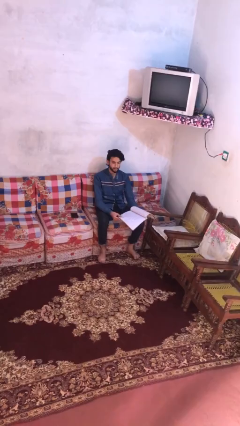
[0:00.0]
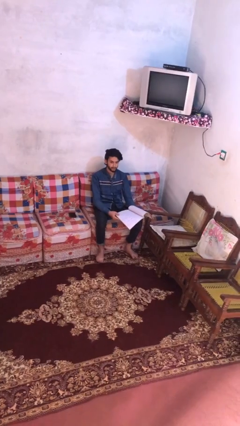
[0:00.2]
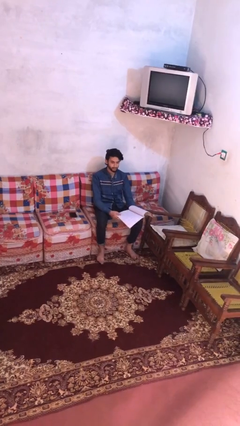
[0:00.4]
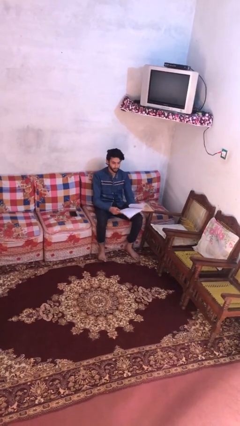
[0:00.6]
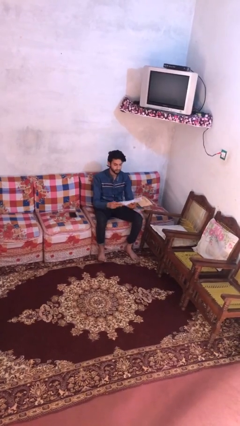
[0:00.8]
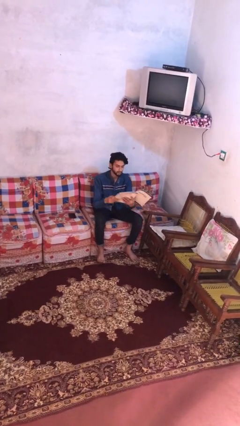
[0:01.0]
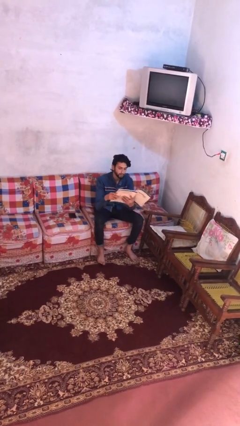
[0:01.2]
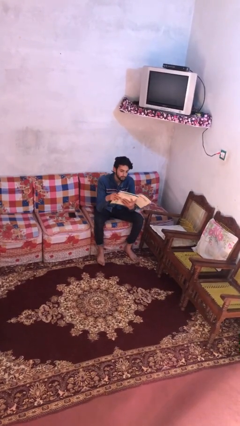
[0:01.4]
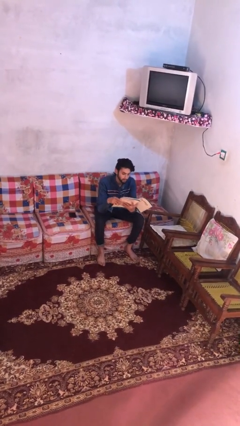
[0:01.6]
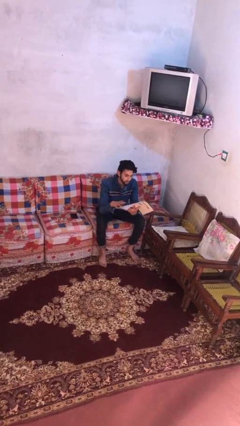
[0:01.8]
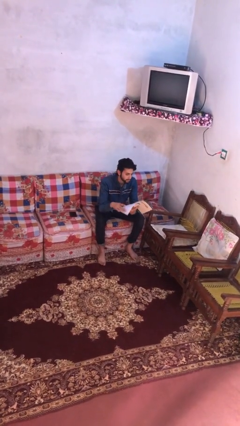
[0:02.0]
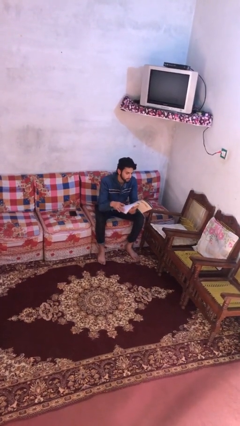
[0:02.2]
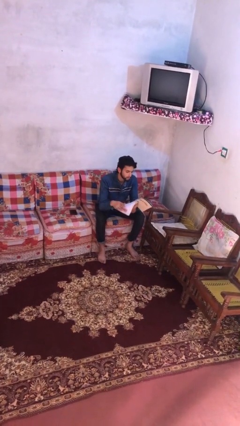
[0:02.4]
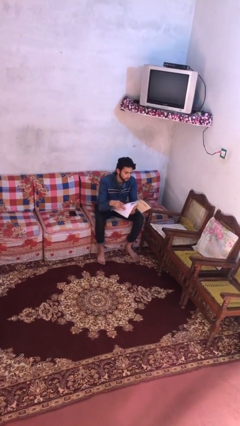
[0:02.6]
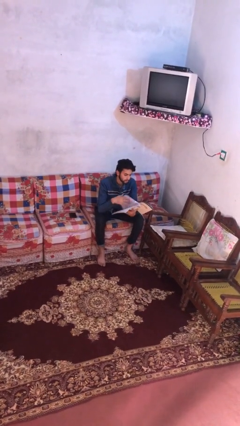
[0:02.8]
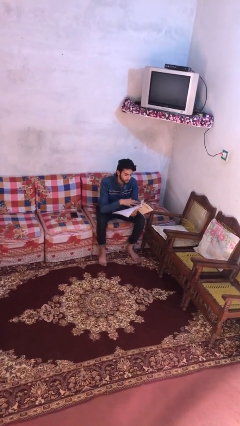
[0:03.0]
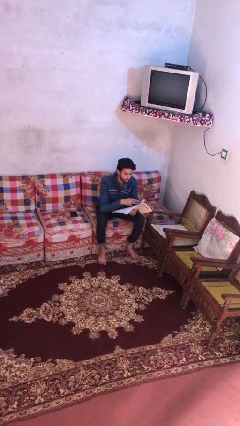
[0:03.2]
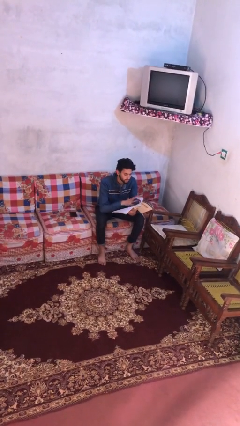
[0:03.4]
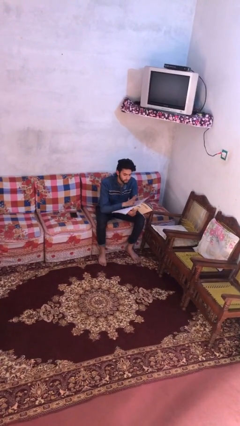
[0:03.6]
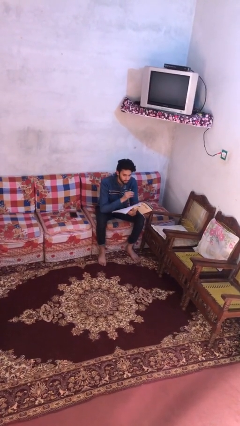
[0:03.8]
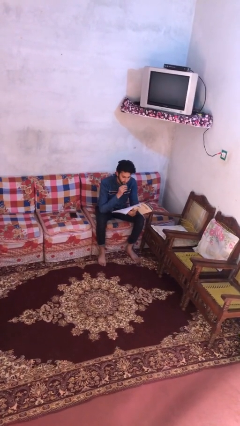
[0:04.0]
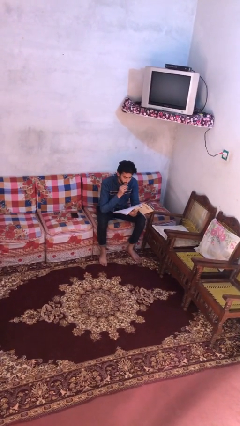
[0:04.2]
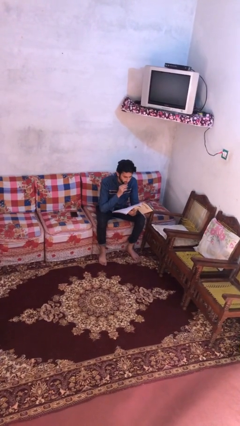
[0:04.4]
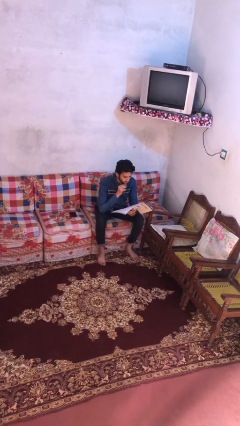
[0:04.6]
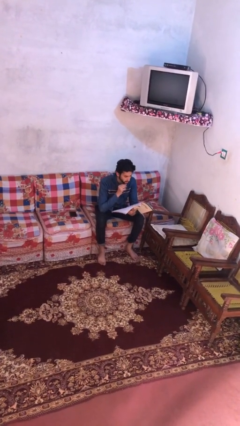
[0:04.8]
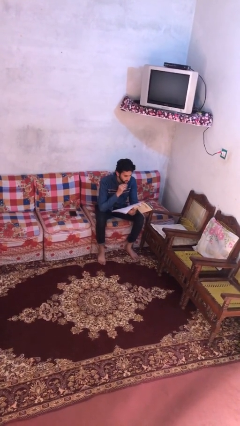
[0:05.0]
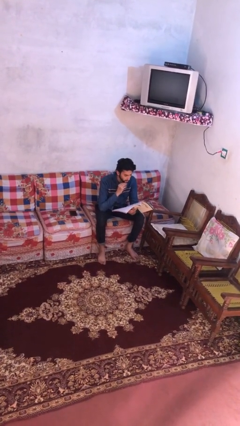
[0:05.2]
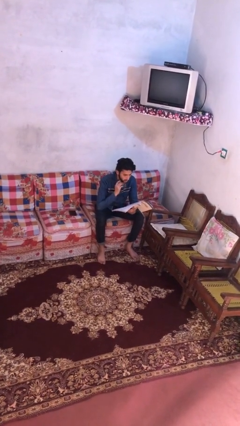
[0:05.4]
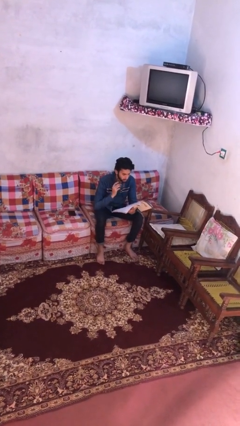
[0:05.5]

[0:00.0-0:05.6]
person reads document

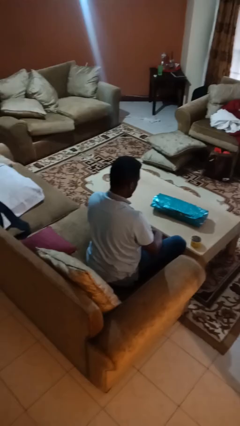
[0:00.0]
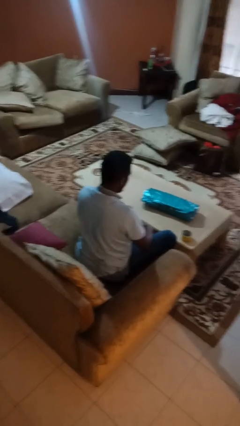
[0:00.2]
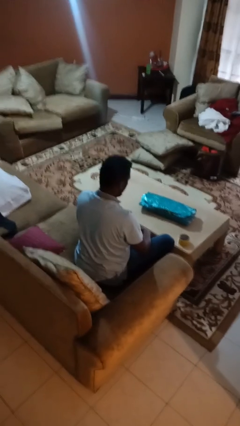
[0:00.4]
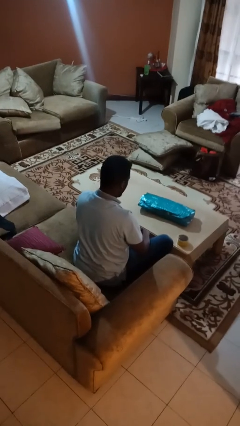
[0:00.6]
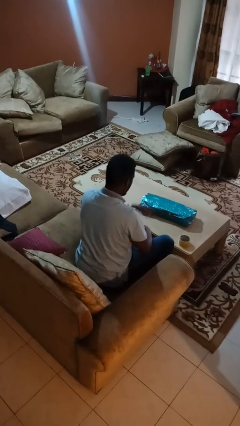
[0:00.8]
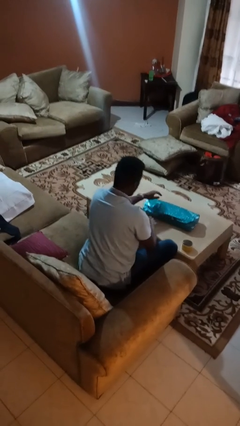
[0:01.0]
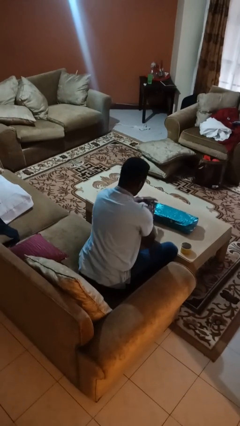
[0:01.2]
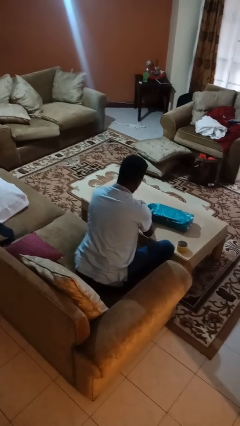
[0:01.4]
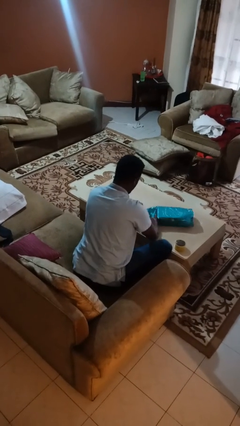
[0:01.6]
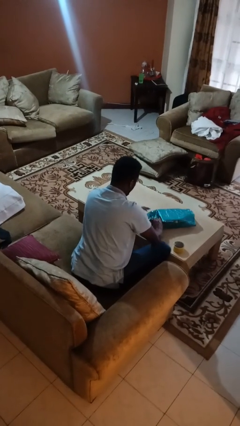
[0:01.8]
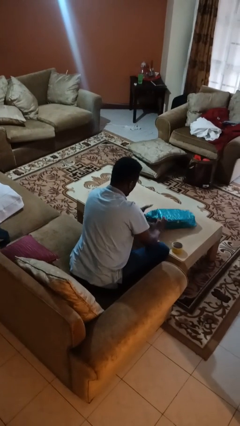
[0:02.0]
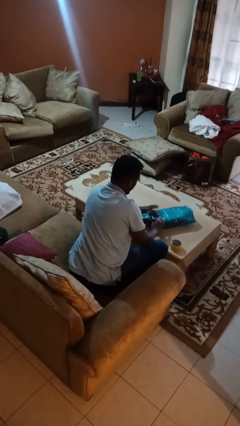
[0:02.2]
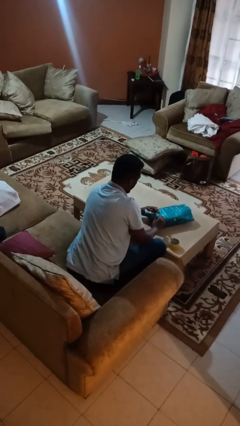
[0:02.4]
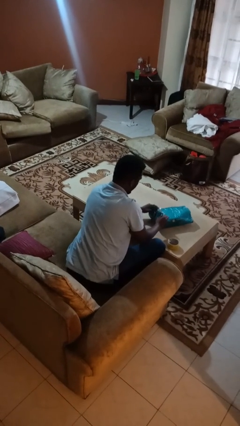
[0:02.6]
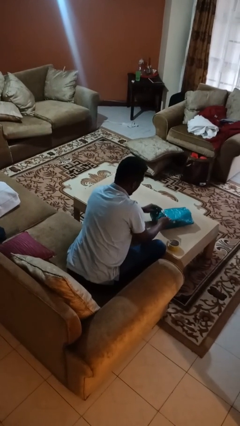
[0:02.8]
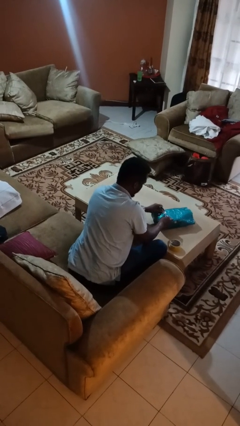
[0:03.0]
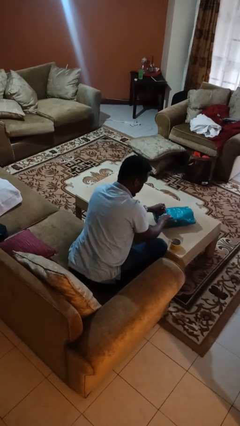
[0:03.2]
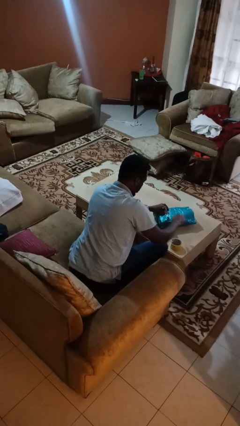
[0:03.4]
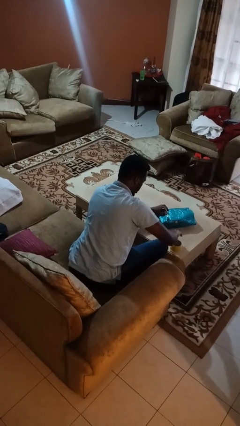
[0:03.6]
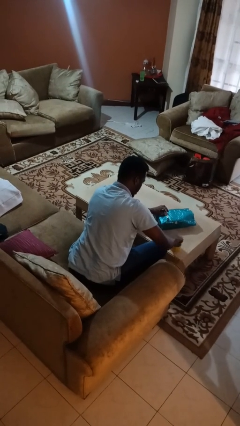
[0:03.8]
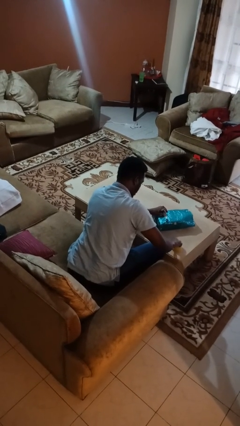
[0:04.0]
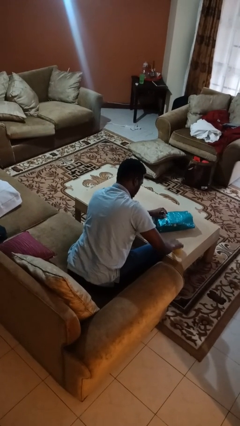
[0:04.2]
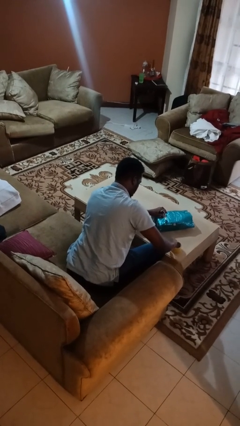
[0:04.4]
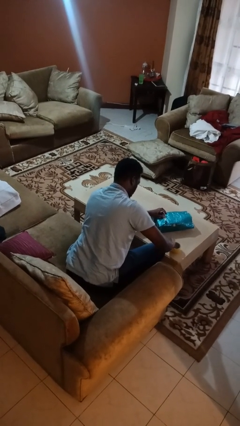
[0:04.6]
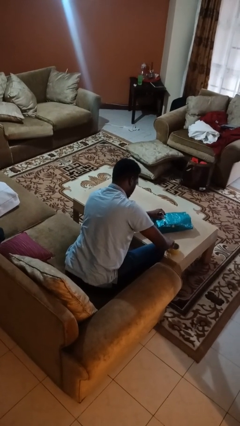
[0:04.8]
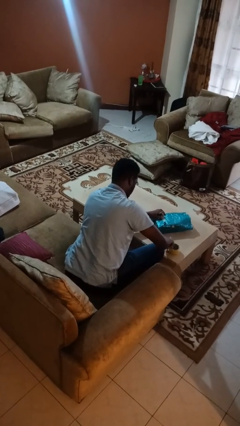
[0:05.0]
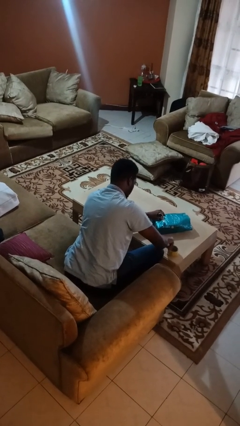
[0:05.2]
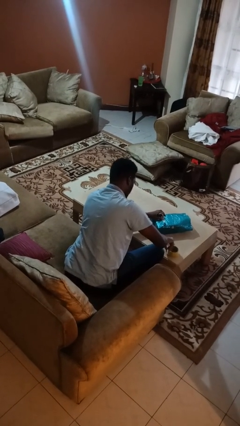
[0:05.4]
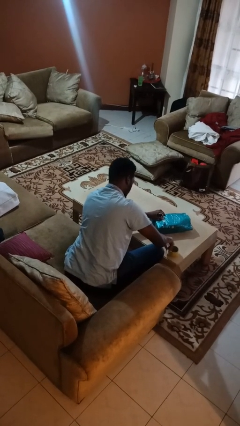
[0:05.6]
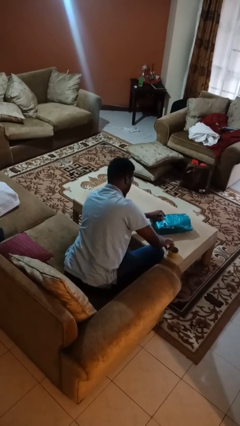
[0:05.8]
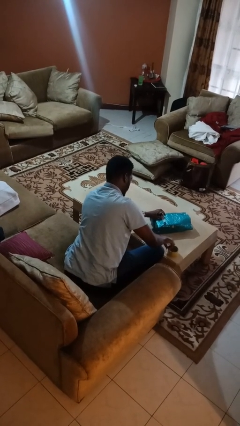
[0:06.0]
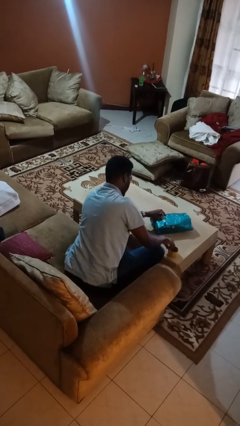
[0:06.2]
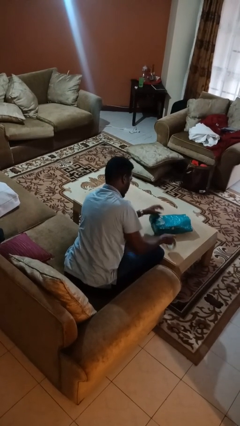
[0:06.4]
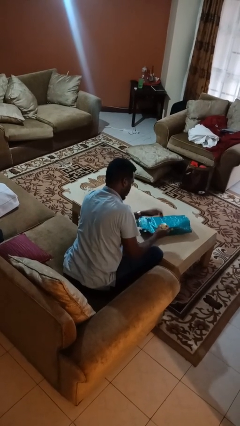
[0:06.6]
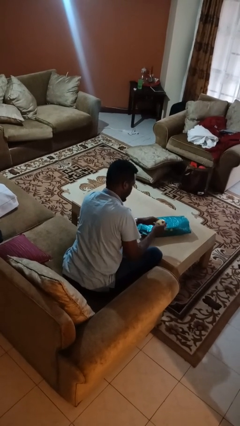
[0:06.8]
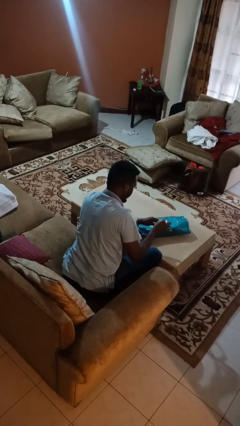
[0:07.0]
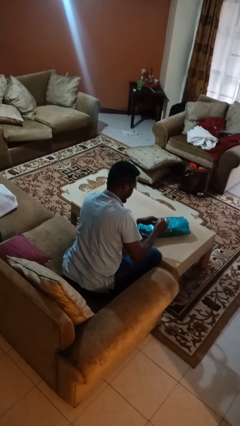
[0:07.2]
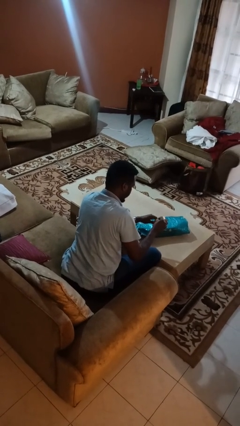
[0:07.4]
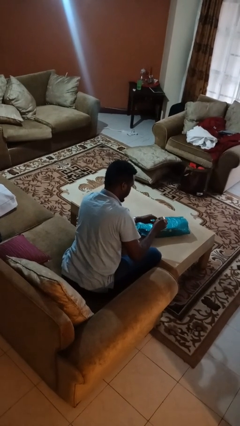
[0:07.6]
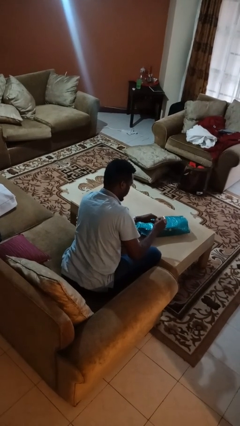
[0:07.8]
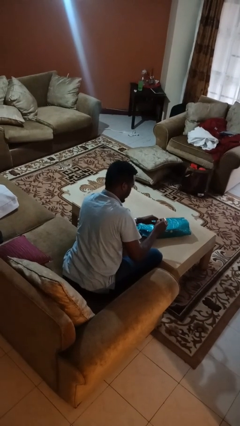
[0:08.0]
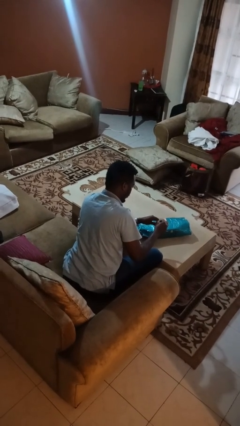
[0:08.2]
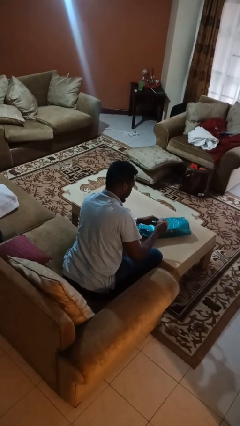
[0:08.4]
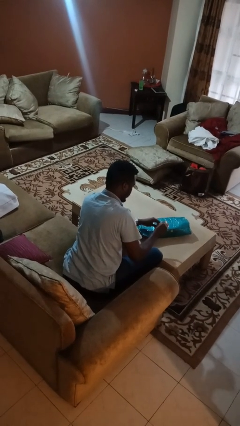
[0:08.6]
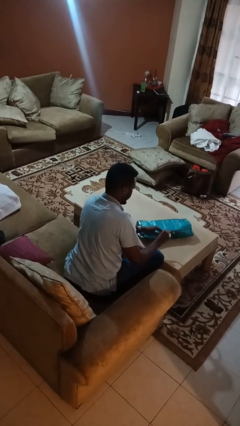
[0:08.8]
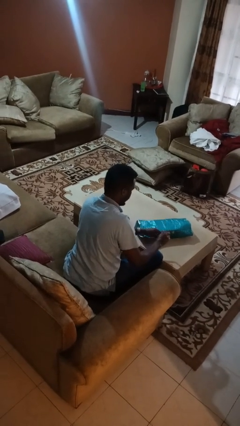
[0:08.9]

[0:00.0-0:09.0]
person wraps box

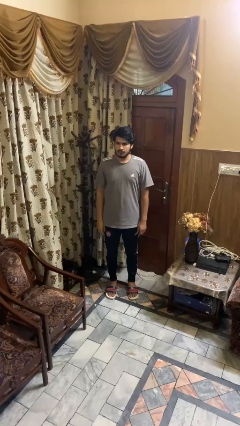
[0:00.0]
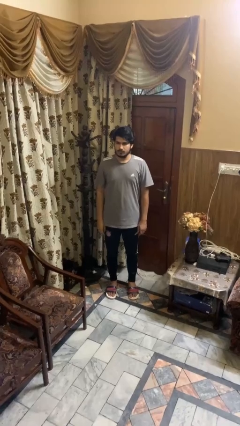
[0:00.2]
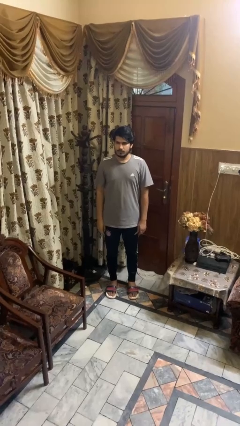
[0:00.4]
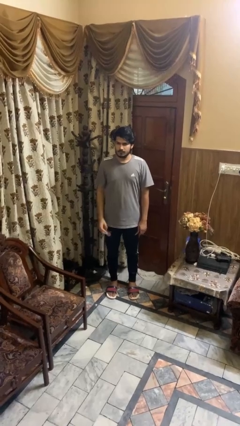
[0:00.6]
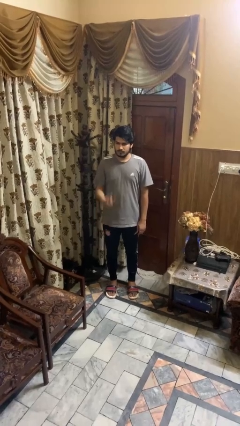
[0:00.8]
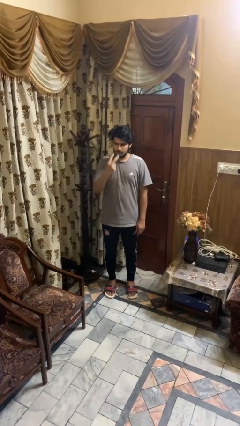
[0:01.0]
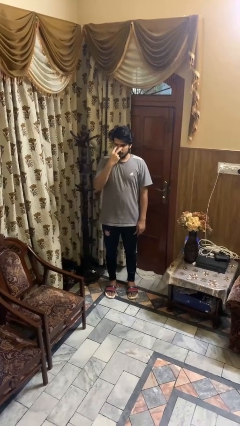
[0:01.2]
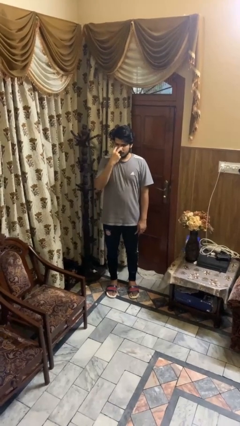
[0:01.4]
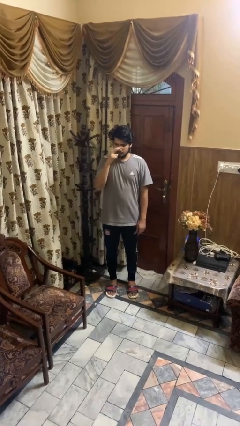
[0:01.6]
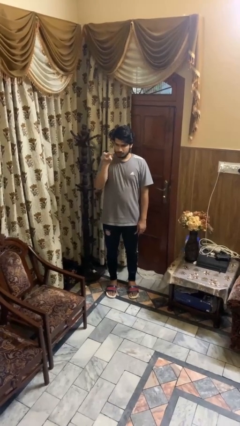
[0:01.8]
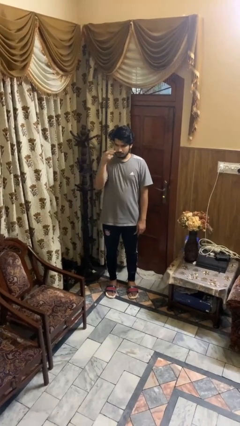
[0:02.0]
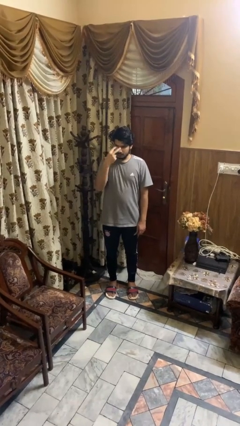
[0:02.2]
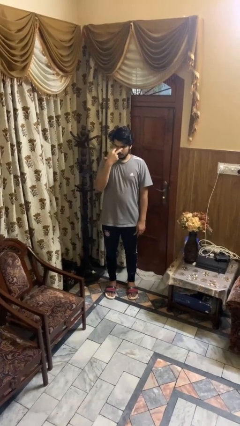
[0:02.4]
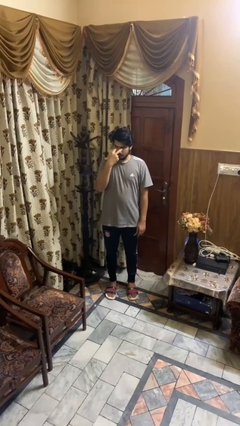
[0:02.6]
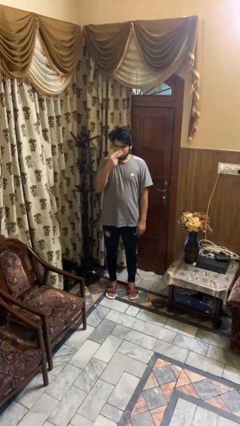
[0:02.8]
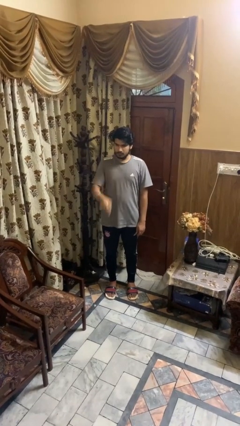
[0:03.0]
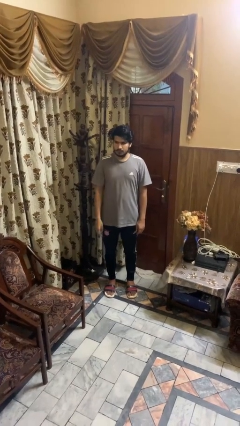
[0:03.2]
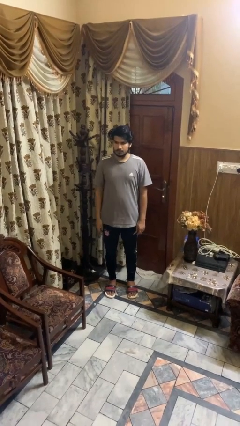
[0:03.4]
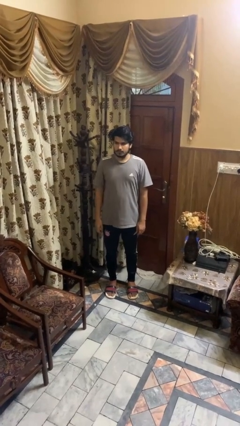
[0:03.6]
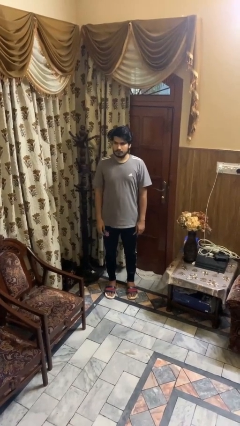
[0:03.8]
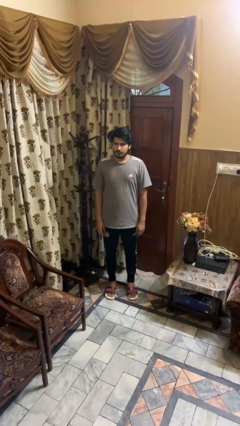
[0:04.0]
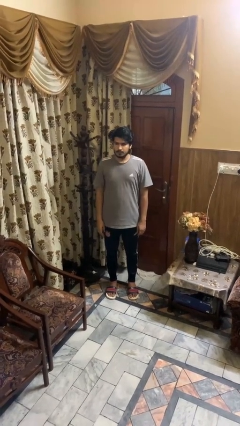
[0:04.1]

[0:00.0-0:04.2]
person gestures watch closely
